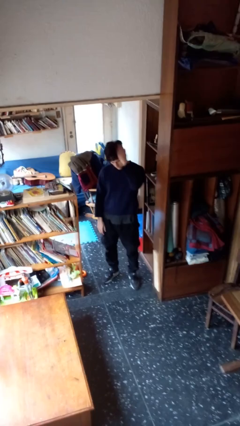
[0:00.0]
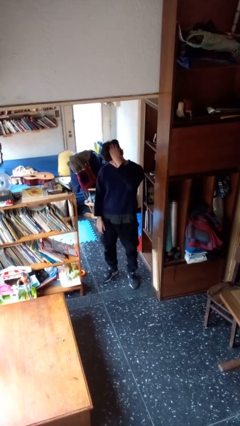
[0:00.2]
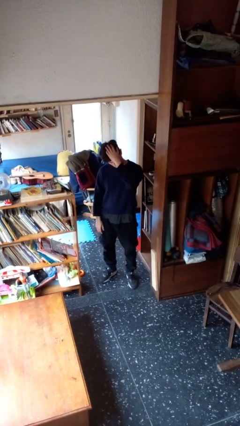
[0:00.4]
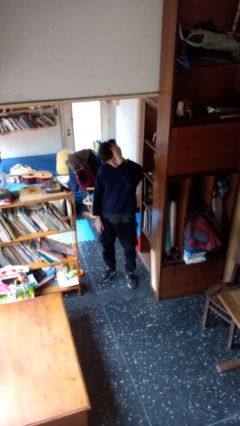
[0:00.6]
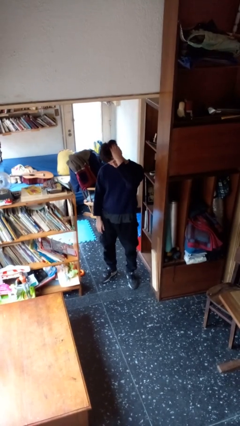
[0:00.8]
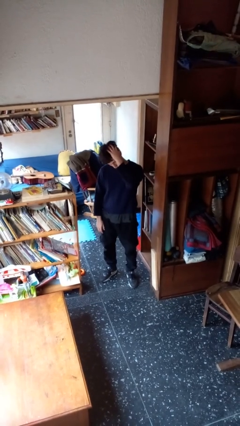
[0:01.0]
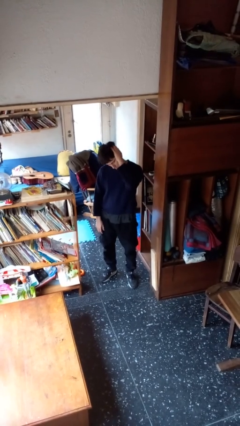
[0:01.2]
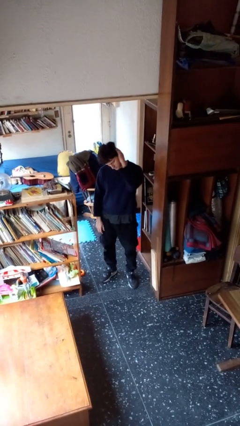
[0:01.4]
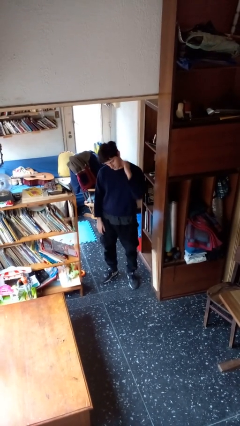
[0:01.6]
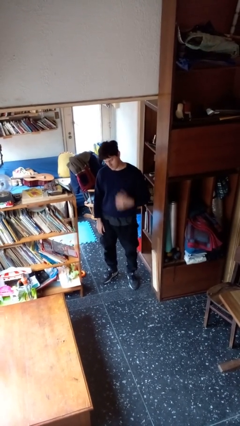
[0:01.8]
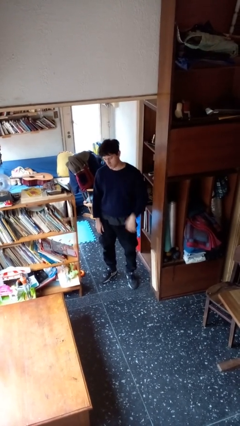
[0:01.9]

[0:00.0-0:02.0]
person pats head

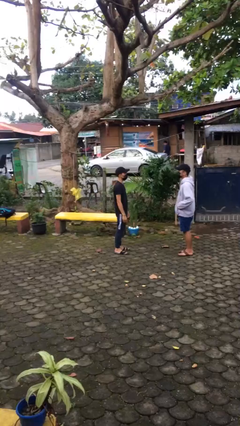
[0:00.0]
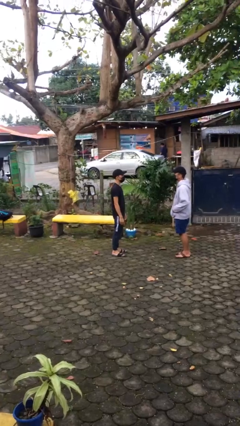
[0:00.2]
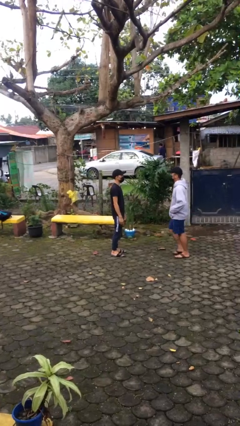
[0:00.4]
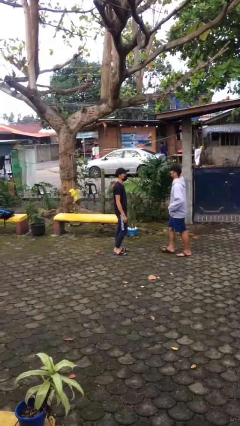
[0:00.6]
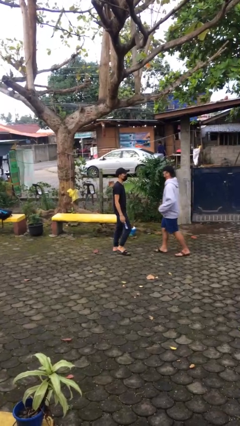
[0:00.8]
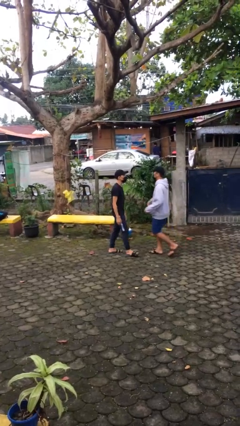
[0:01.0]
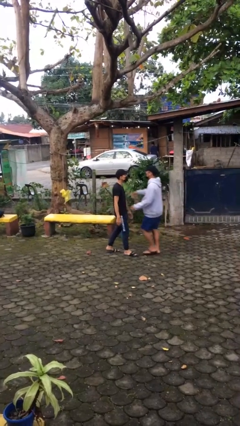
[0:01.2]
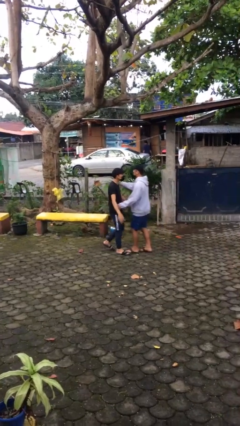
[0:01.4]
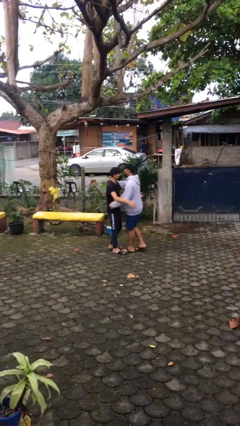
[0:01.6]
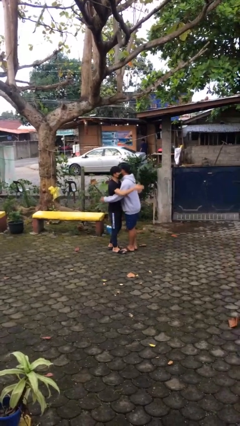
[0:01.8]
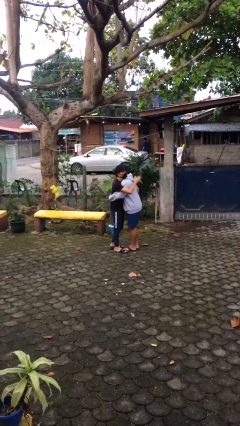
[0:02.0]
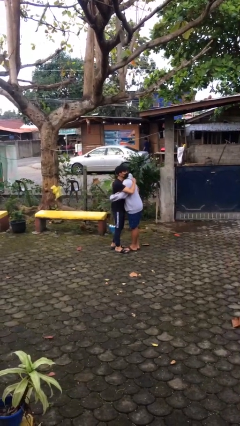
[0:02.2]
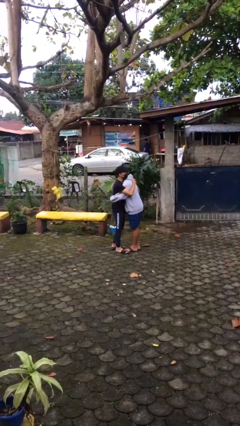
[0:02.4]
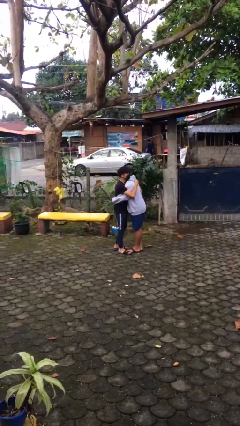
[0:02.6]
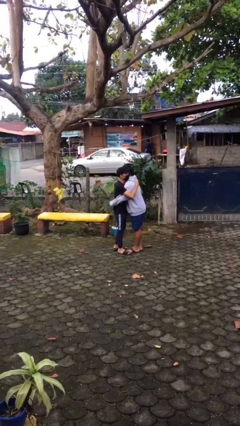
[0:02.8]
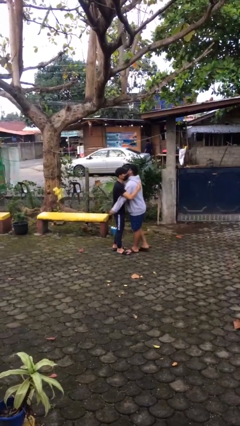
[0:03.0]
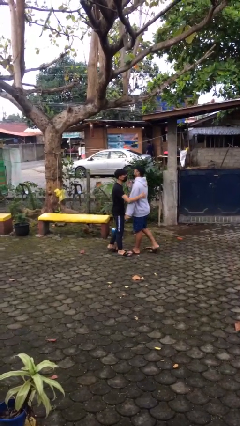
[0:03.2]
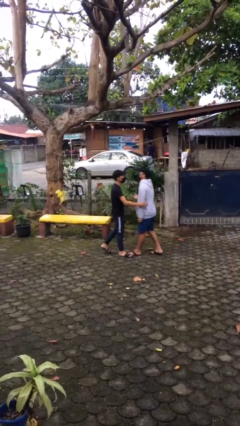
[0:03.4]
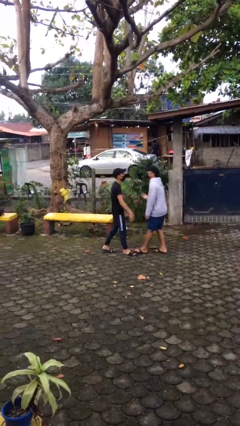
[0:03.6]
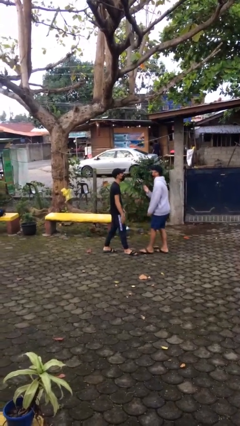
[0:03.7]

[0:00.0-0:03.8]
person embraces person

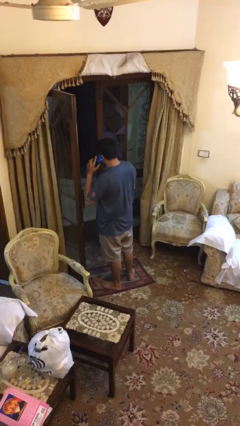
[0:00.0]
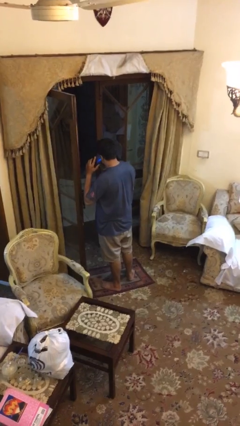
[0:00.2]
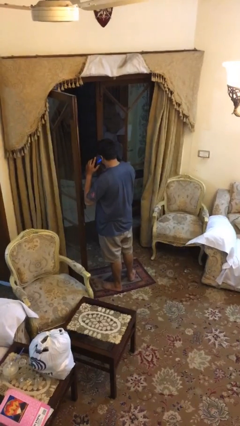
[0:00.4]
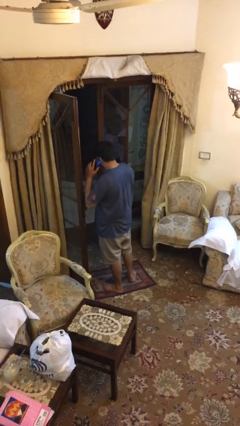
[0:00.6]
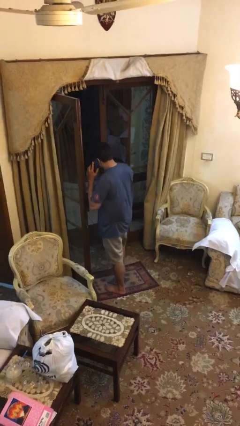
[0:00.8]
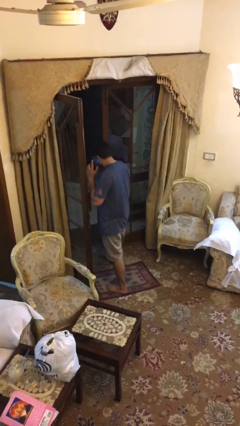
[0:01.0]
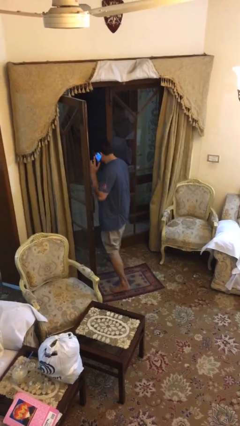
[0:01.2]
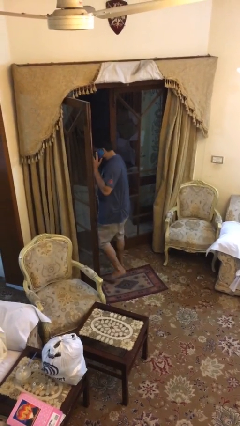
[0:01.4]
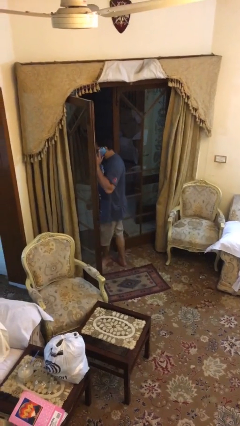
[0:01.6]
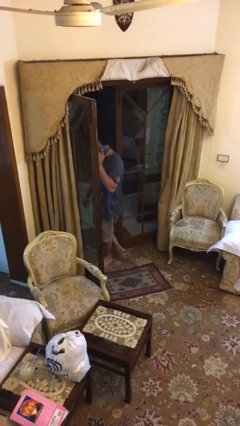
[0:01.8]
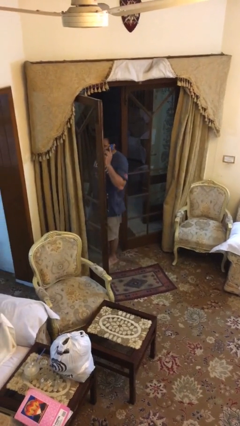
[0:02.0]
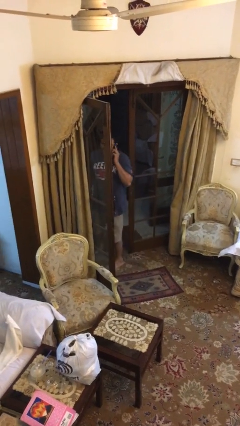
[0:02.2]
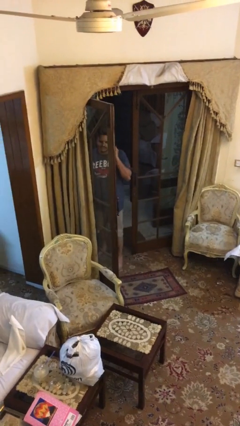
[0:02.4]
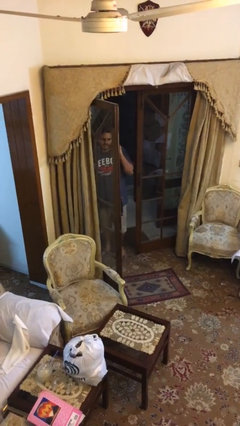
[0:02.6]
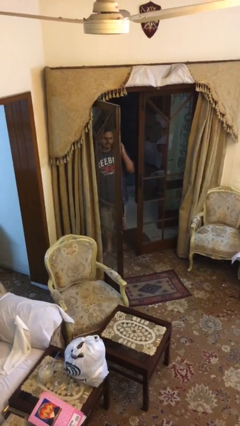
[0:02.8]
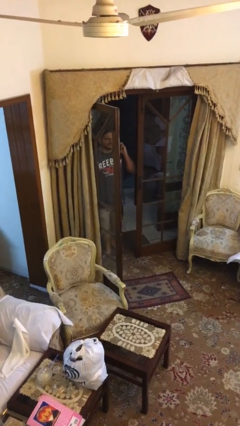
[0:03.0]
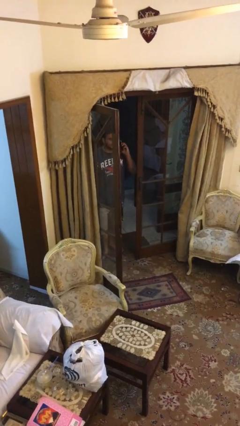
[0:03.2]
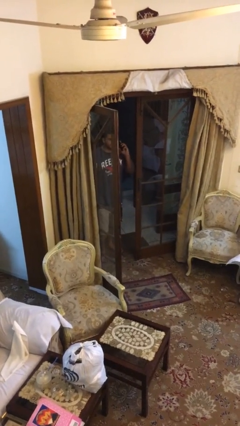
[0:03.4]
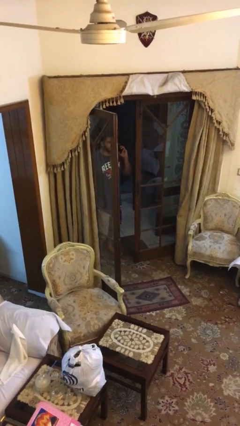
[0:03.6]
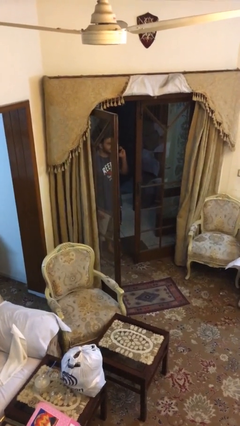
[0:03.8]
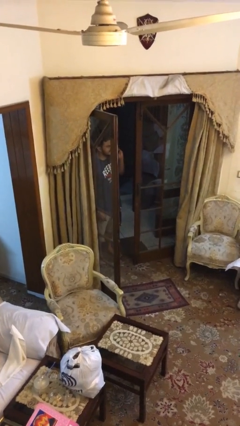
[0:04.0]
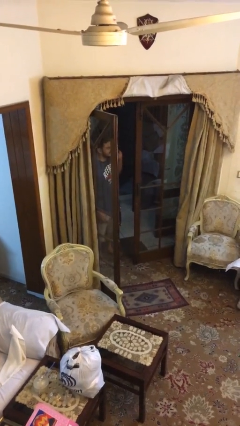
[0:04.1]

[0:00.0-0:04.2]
person exits scene through structure

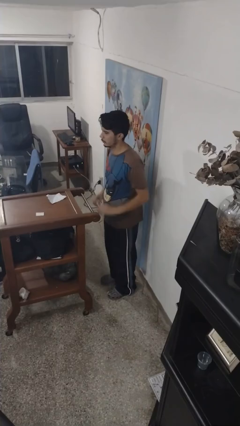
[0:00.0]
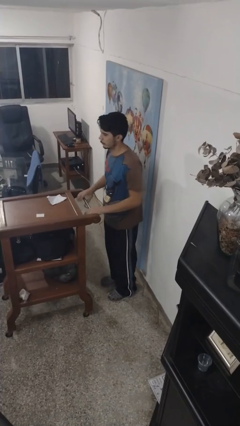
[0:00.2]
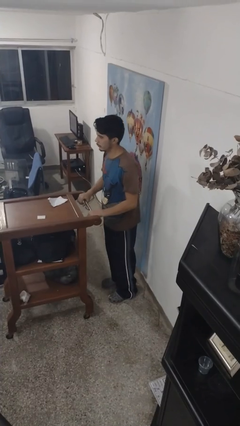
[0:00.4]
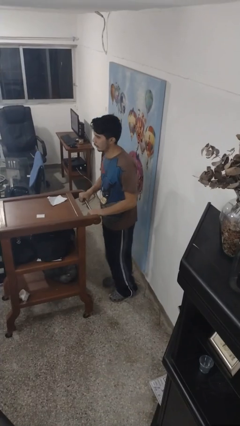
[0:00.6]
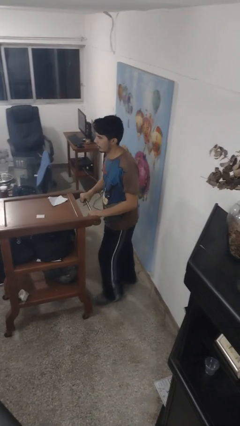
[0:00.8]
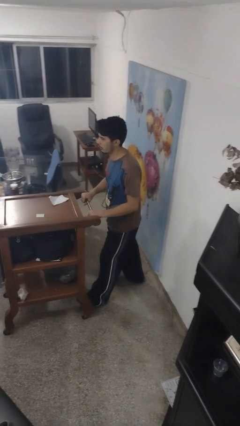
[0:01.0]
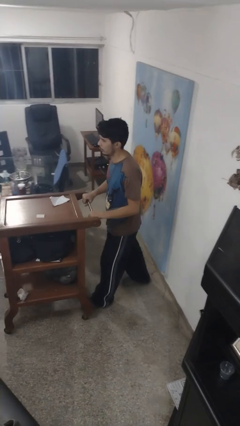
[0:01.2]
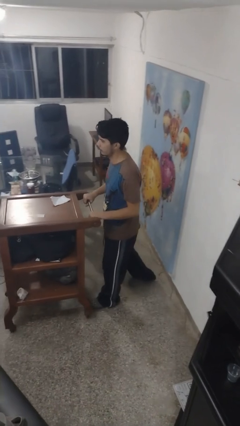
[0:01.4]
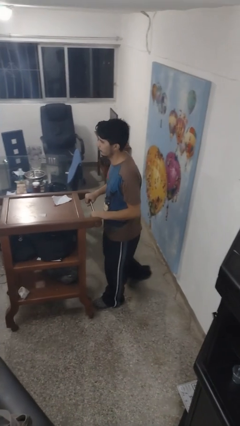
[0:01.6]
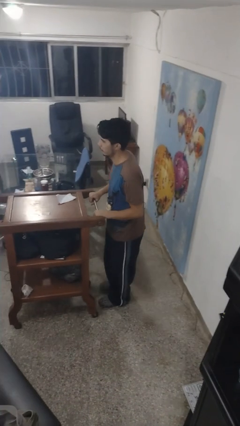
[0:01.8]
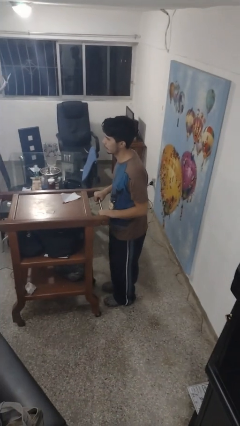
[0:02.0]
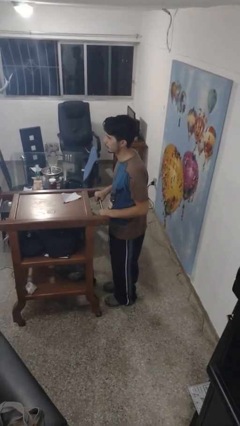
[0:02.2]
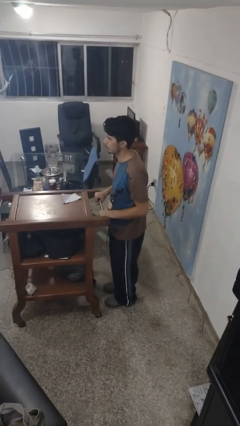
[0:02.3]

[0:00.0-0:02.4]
person pushes wheeled cart

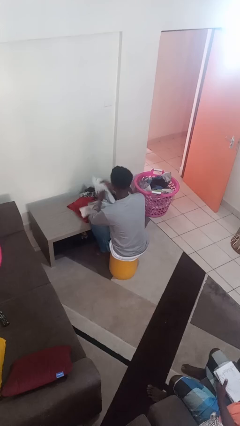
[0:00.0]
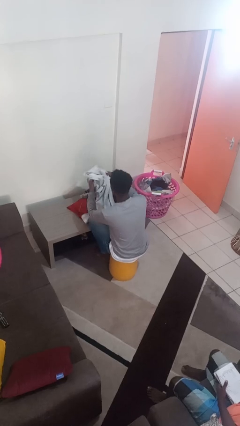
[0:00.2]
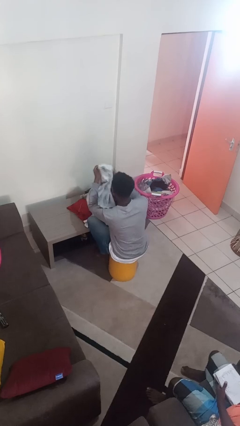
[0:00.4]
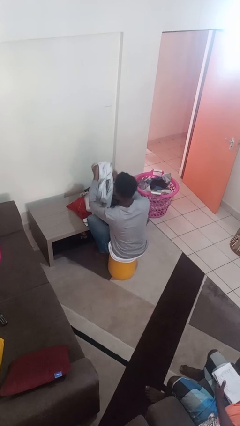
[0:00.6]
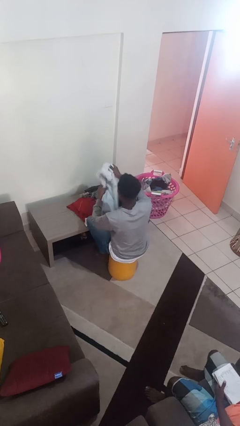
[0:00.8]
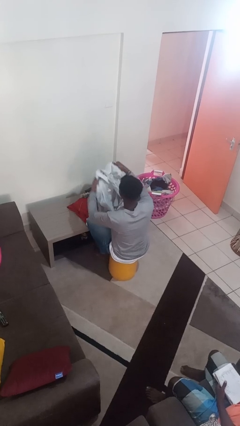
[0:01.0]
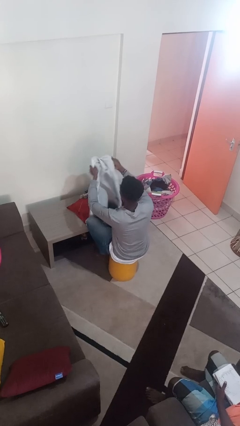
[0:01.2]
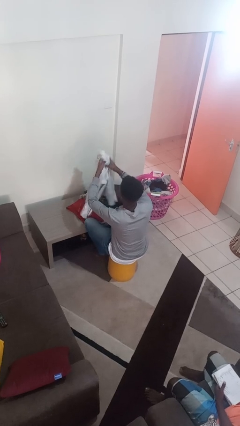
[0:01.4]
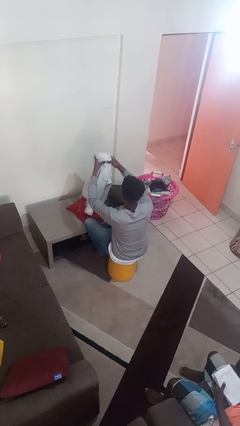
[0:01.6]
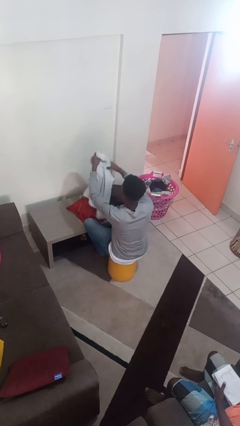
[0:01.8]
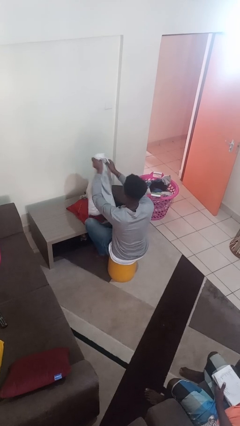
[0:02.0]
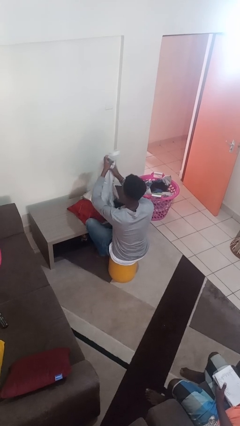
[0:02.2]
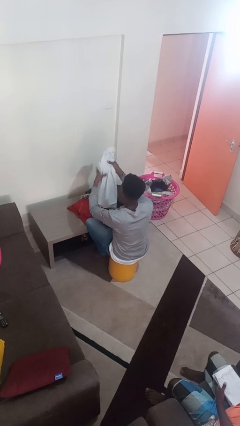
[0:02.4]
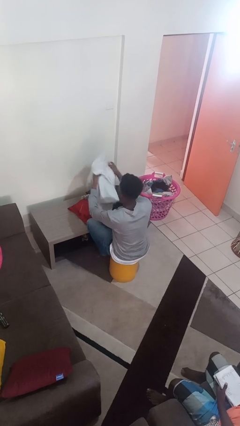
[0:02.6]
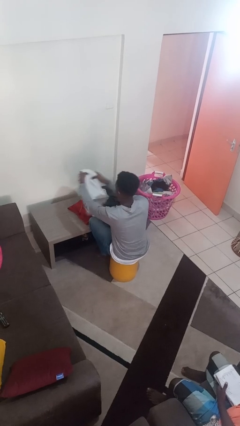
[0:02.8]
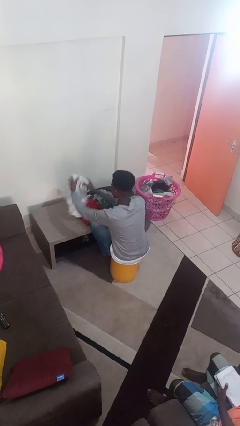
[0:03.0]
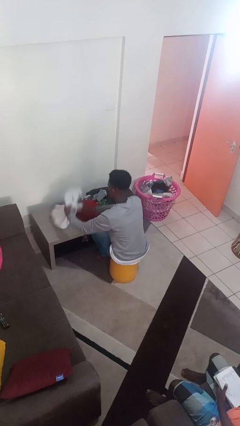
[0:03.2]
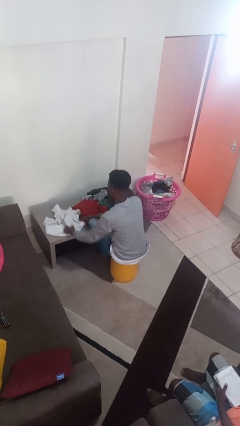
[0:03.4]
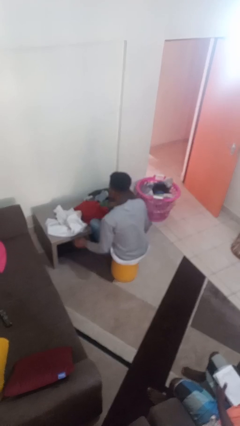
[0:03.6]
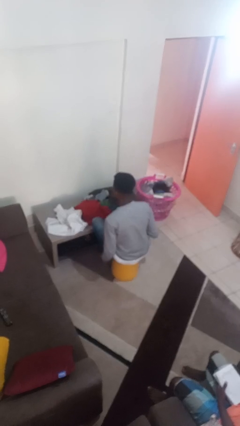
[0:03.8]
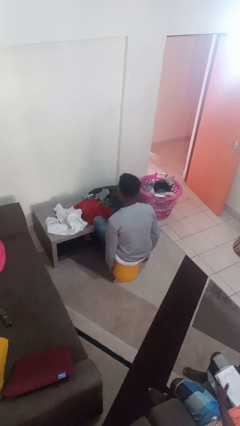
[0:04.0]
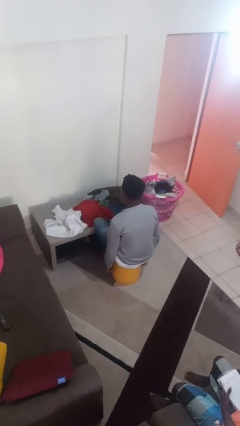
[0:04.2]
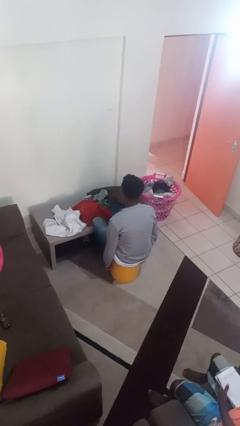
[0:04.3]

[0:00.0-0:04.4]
person folds shirt

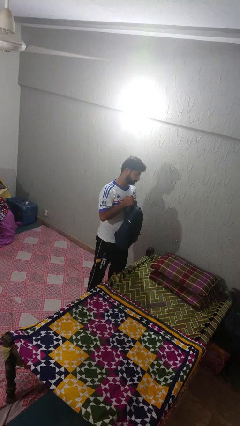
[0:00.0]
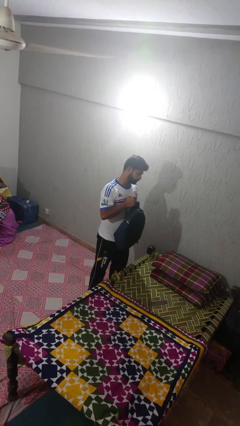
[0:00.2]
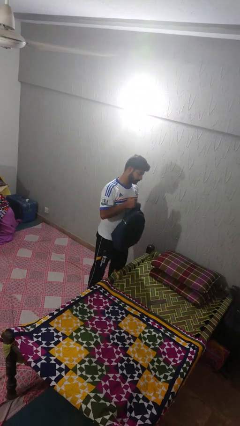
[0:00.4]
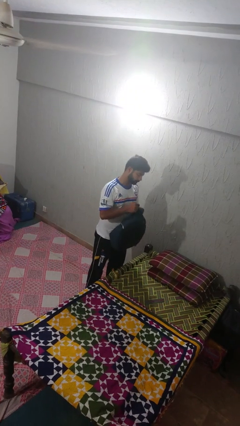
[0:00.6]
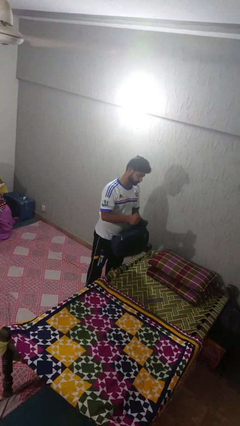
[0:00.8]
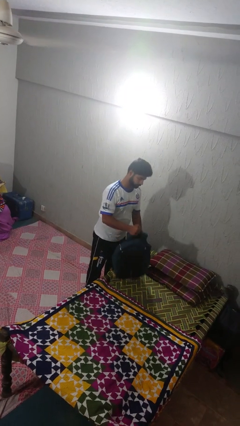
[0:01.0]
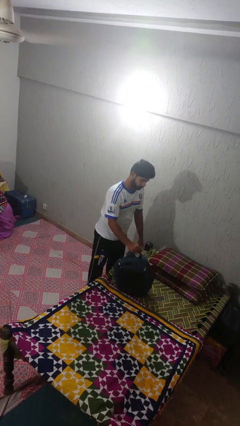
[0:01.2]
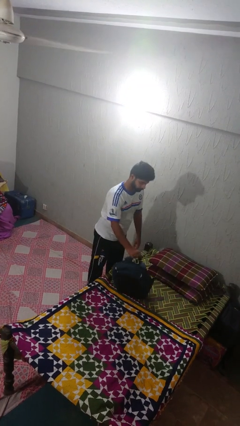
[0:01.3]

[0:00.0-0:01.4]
person puts down object on bed
